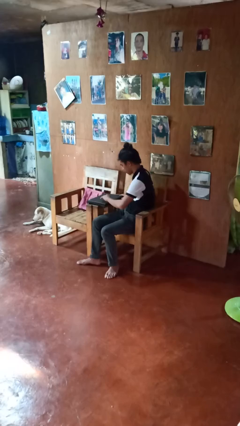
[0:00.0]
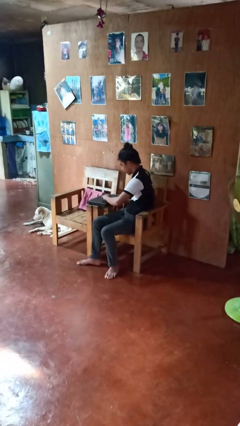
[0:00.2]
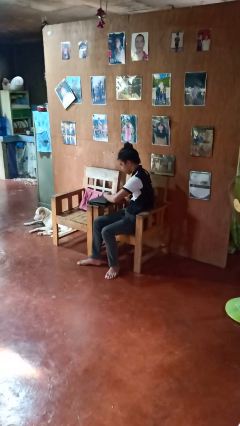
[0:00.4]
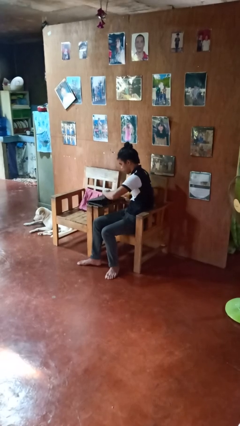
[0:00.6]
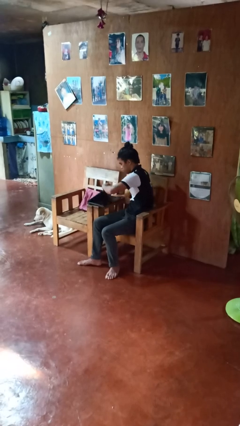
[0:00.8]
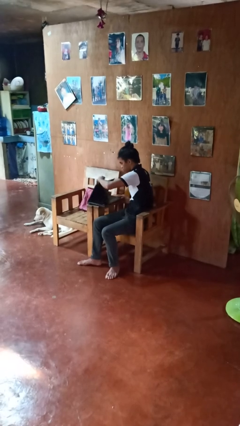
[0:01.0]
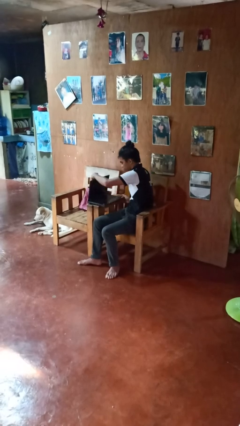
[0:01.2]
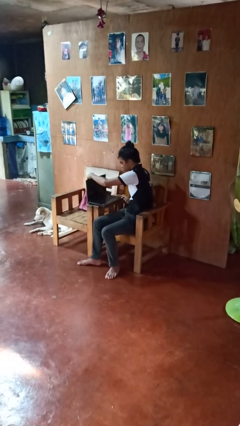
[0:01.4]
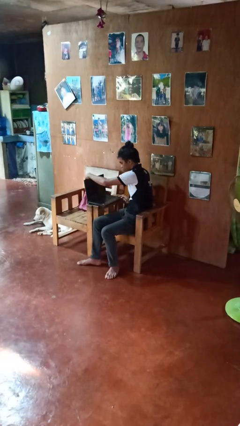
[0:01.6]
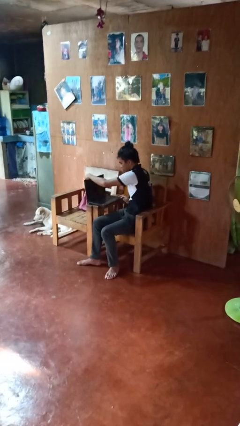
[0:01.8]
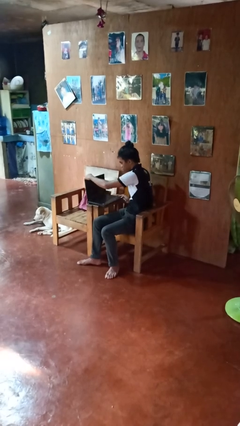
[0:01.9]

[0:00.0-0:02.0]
person opens laptop

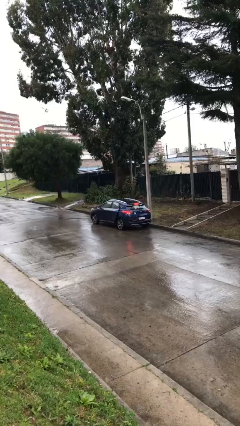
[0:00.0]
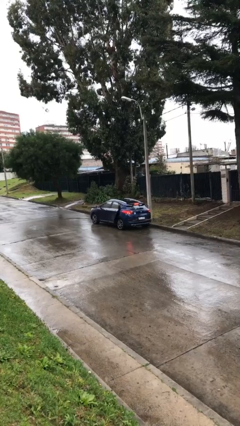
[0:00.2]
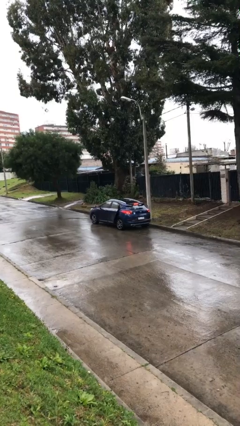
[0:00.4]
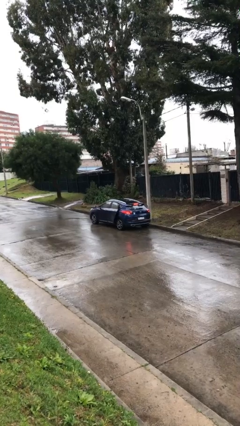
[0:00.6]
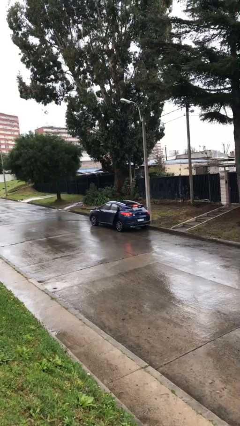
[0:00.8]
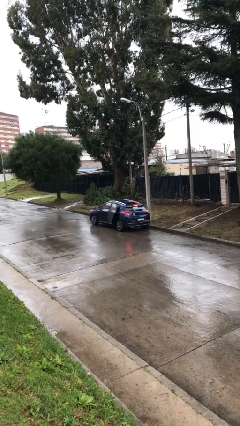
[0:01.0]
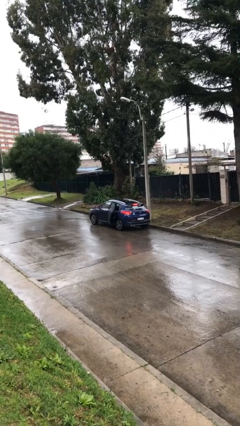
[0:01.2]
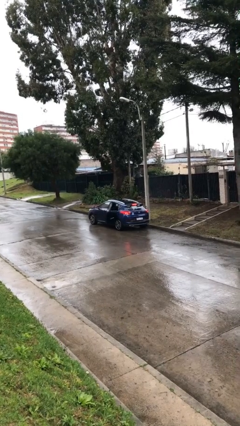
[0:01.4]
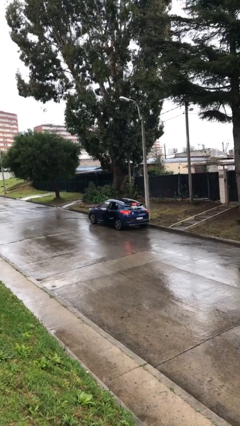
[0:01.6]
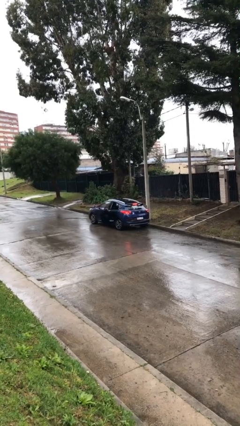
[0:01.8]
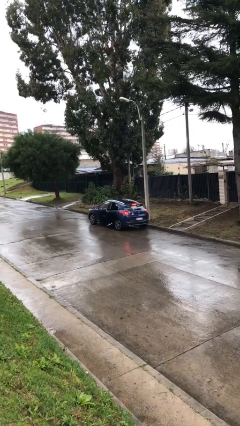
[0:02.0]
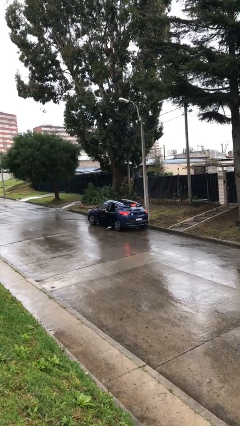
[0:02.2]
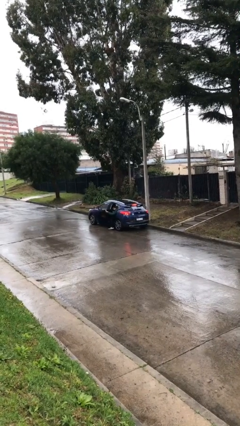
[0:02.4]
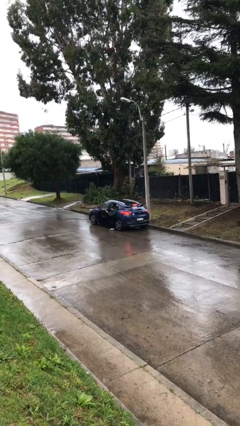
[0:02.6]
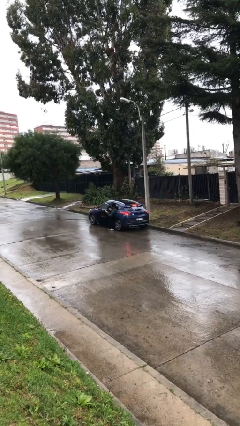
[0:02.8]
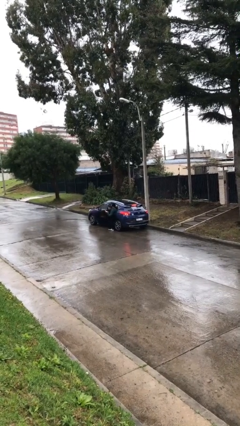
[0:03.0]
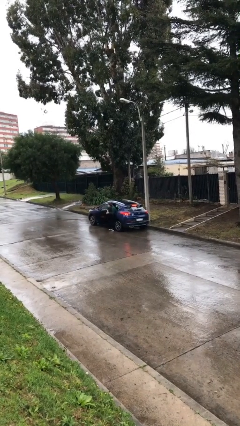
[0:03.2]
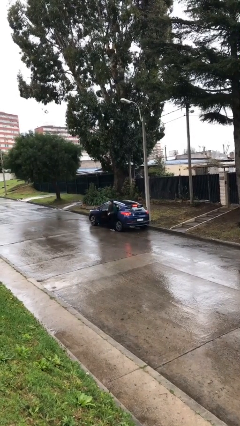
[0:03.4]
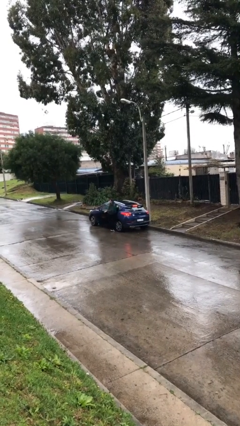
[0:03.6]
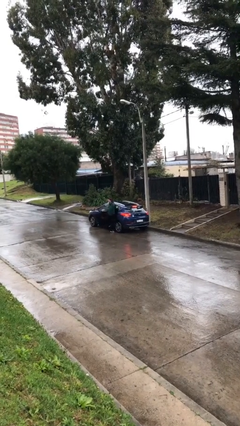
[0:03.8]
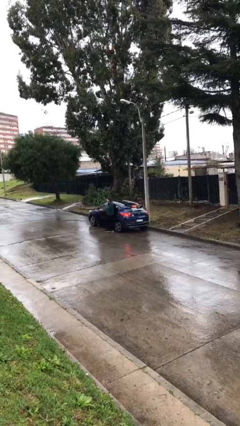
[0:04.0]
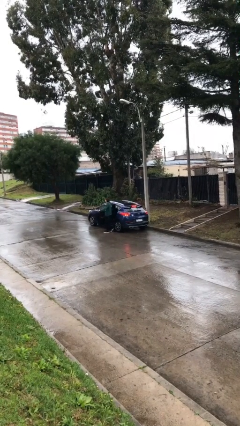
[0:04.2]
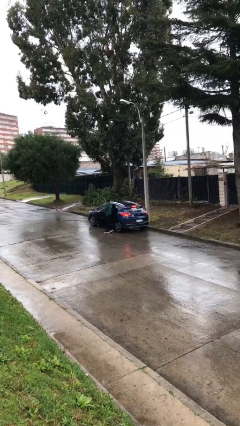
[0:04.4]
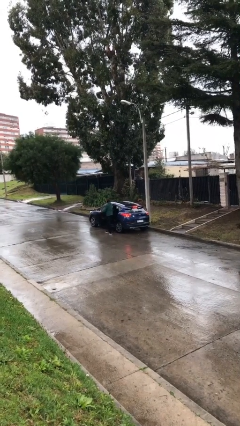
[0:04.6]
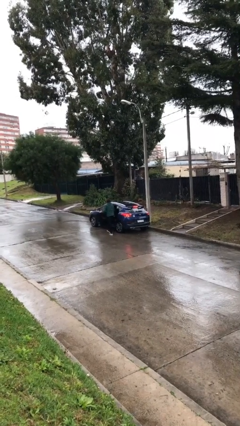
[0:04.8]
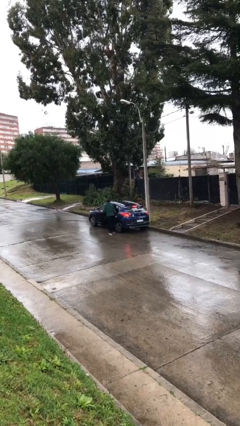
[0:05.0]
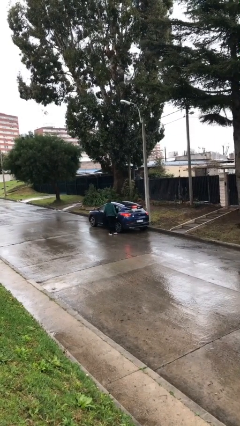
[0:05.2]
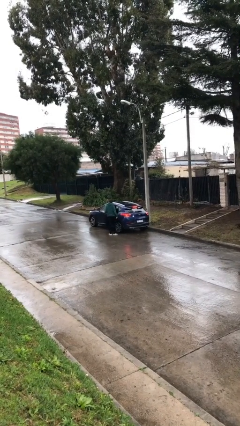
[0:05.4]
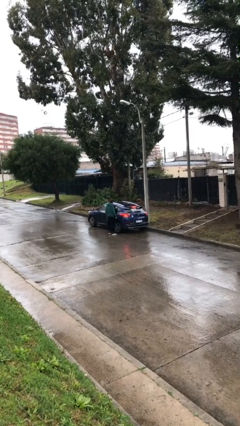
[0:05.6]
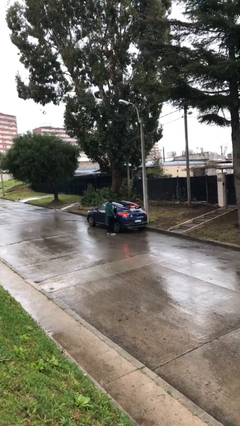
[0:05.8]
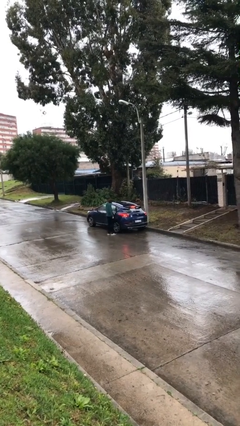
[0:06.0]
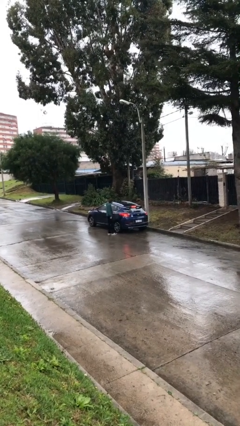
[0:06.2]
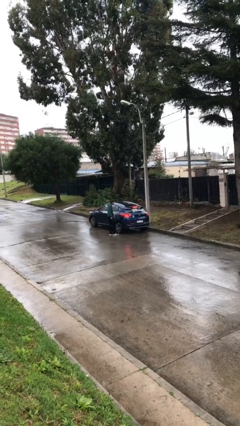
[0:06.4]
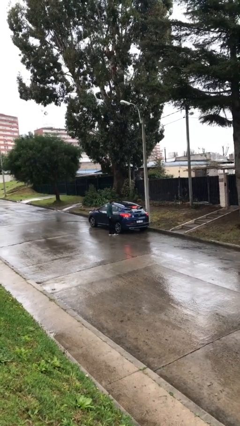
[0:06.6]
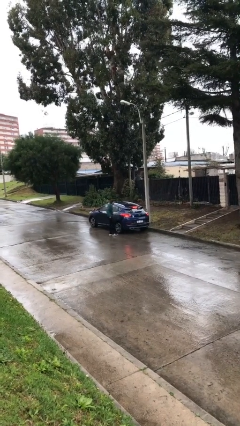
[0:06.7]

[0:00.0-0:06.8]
car drops off person

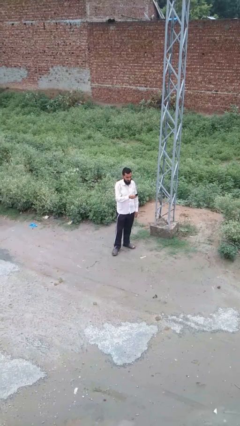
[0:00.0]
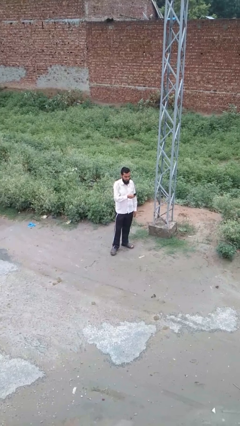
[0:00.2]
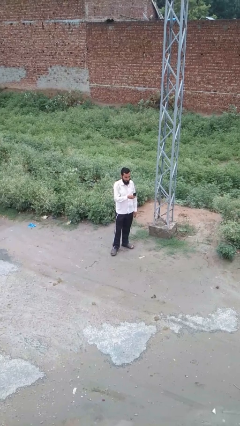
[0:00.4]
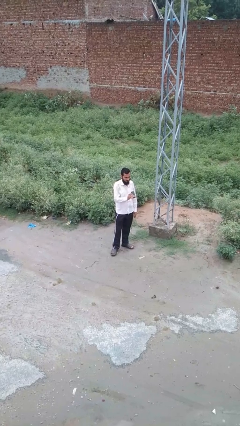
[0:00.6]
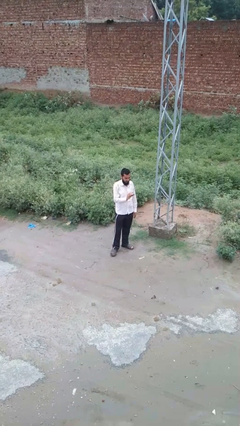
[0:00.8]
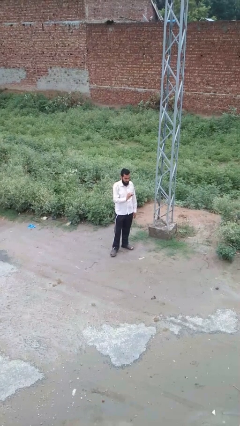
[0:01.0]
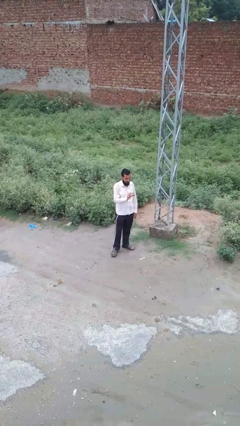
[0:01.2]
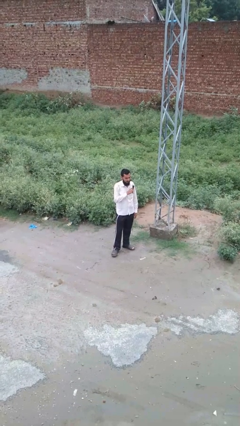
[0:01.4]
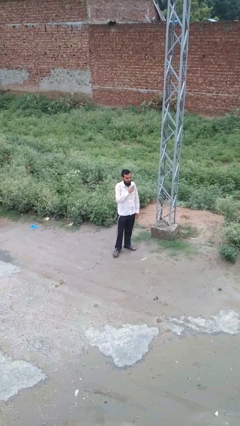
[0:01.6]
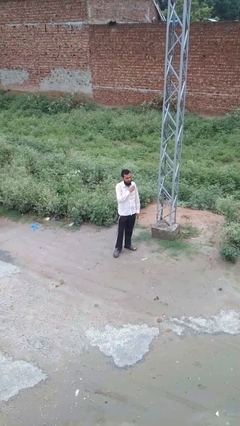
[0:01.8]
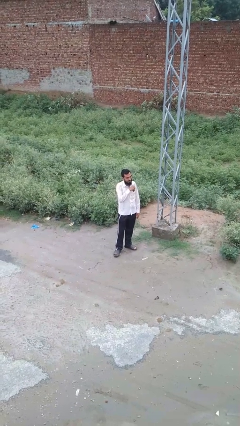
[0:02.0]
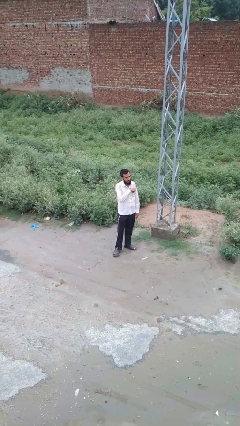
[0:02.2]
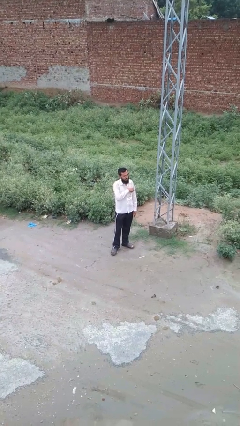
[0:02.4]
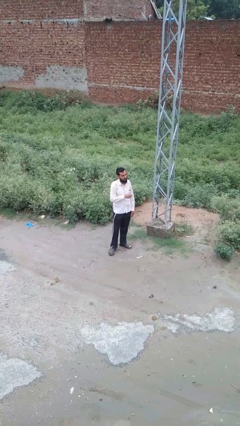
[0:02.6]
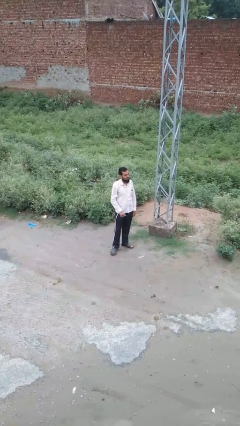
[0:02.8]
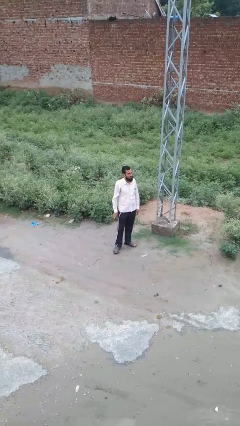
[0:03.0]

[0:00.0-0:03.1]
person puts phone into pocket

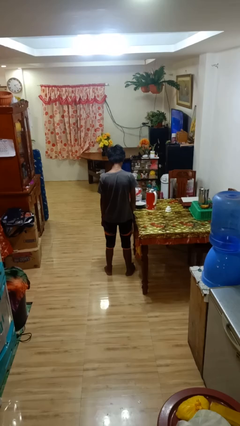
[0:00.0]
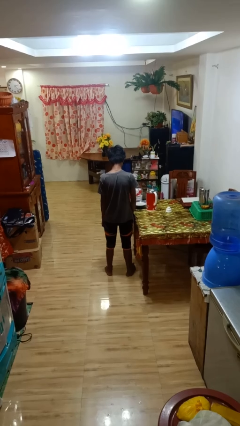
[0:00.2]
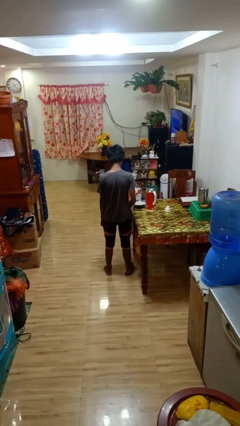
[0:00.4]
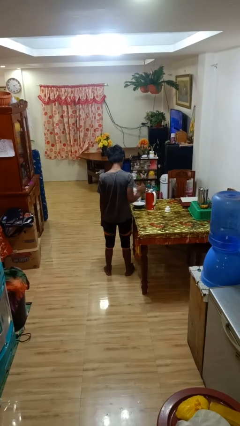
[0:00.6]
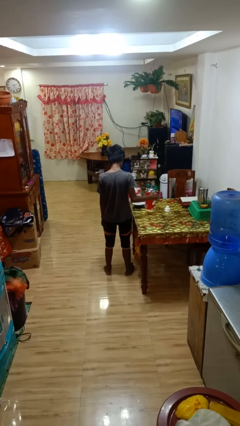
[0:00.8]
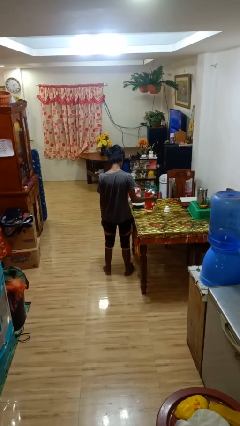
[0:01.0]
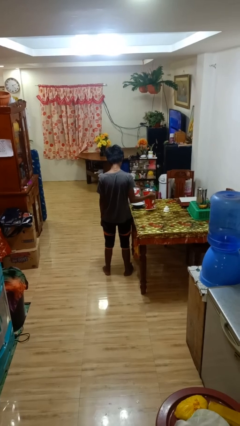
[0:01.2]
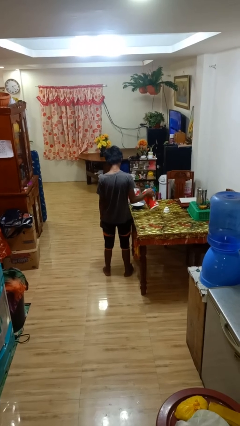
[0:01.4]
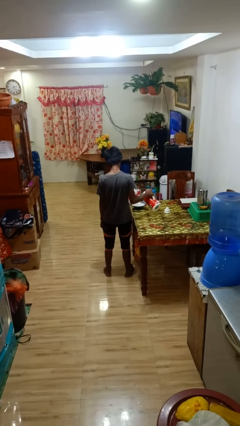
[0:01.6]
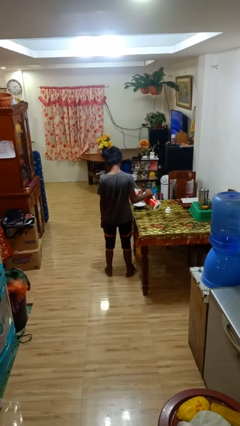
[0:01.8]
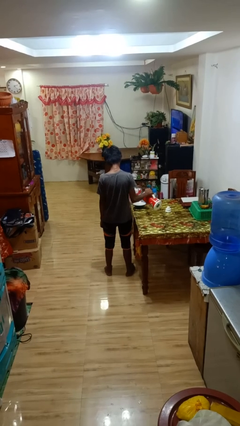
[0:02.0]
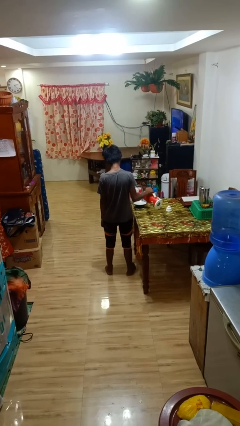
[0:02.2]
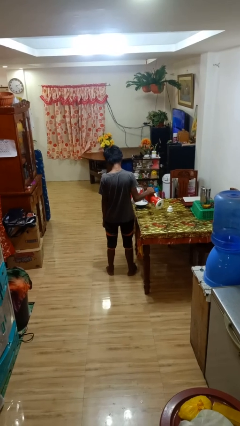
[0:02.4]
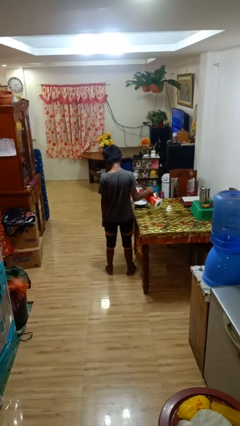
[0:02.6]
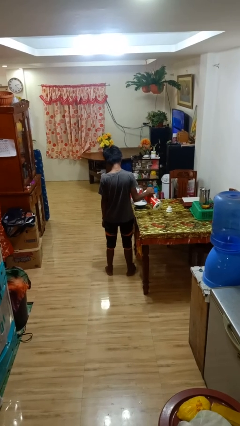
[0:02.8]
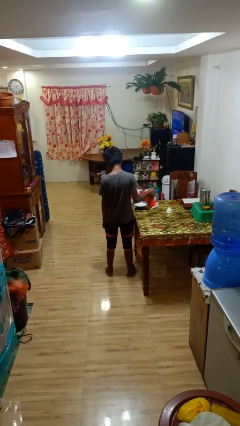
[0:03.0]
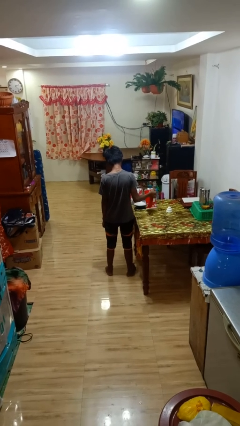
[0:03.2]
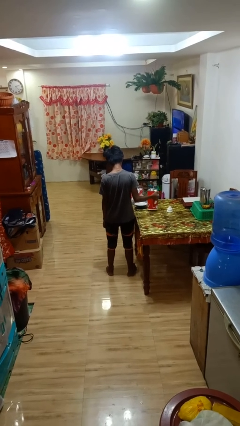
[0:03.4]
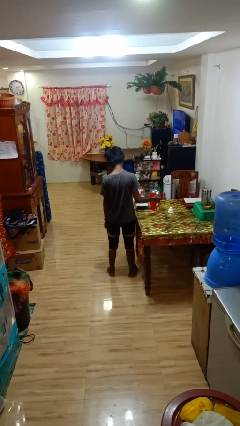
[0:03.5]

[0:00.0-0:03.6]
person pours into bowl

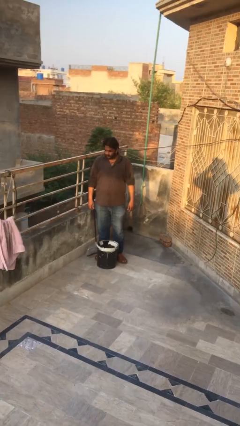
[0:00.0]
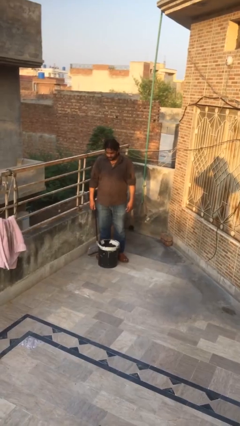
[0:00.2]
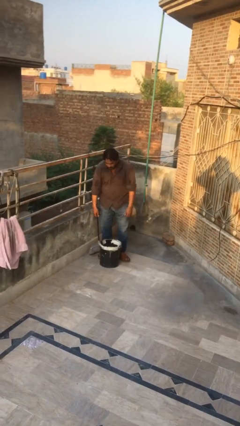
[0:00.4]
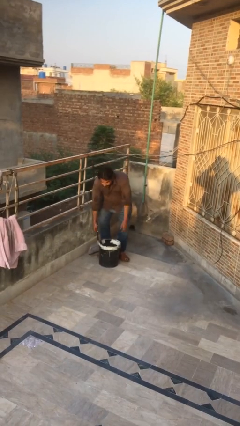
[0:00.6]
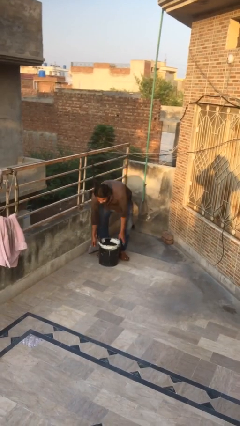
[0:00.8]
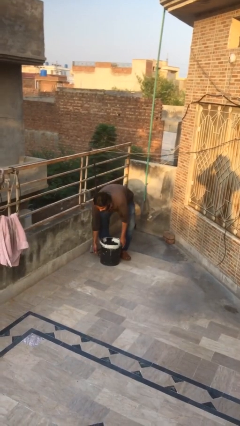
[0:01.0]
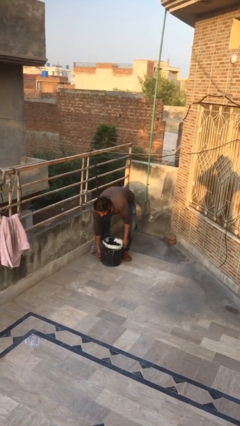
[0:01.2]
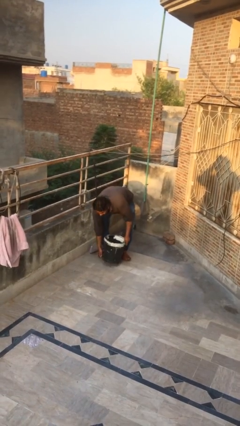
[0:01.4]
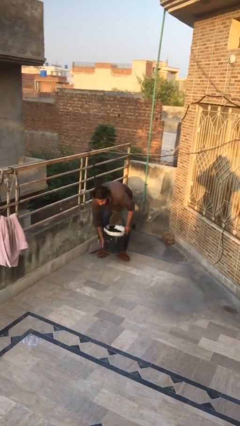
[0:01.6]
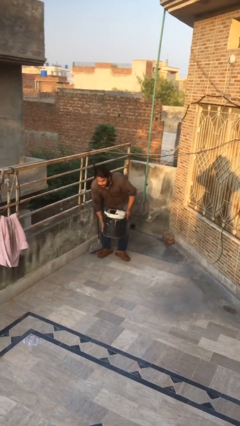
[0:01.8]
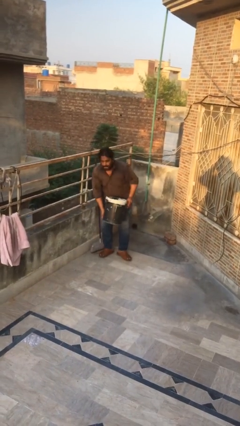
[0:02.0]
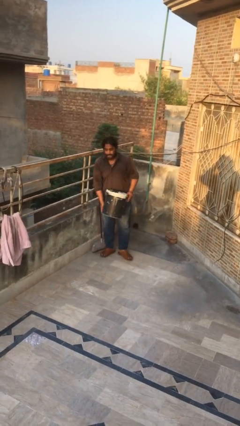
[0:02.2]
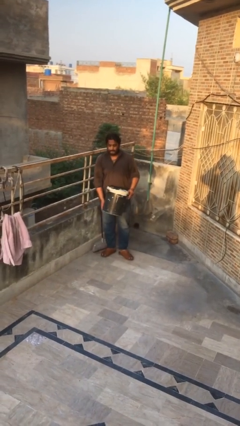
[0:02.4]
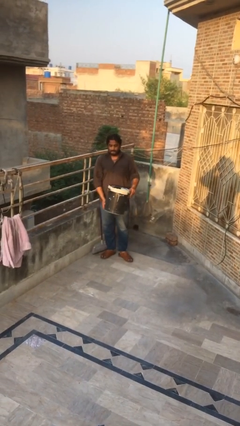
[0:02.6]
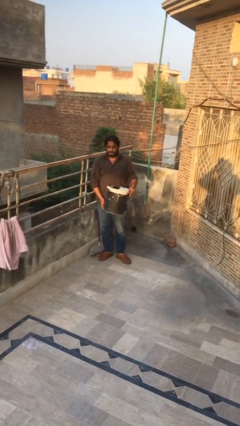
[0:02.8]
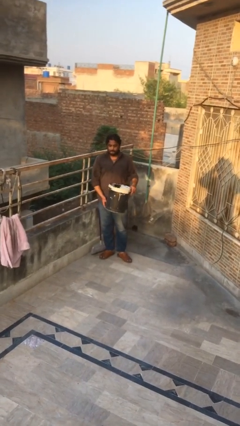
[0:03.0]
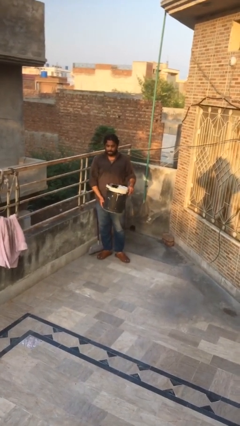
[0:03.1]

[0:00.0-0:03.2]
person picks up object from floor
